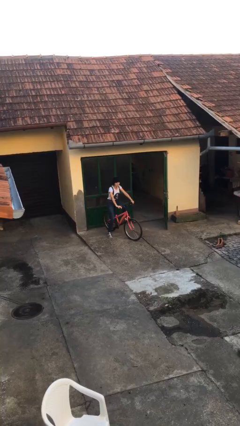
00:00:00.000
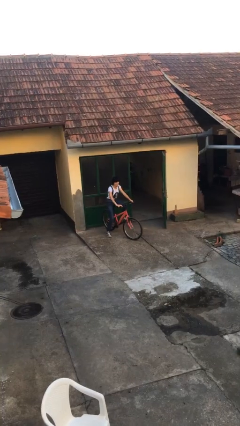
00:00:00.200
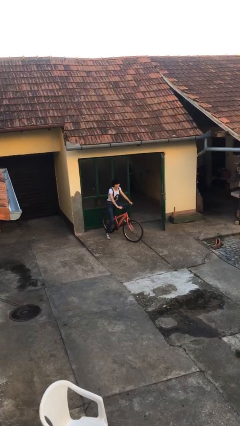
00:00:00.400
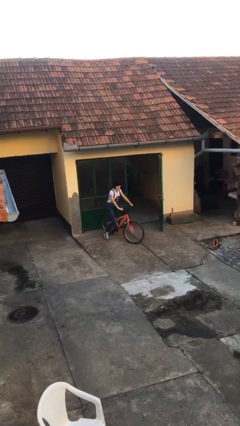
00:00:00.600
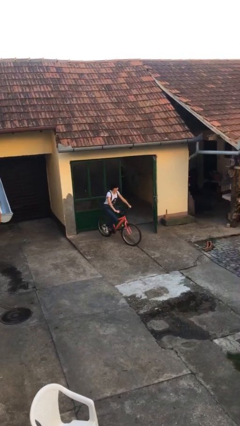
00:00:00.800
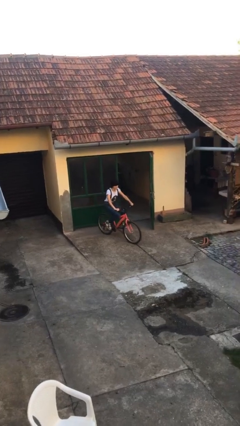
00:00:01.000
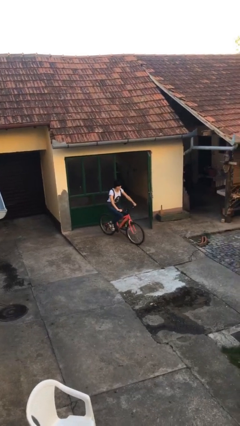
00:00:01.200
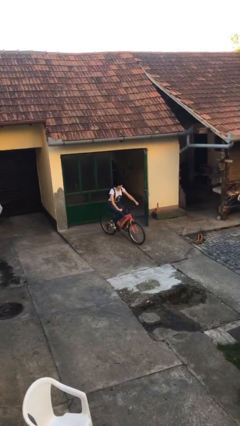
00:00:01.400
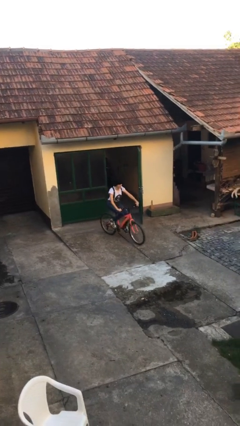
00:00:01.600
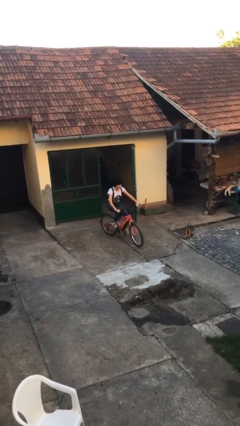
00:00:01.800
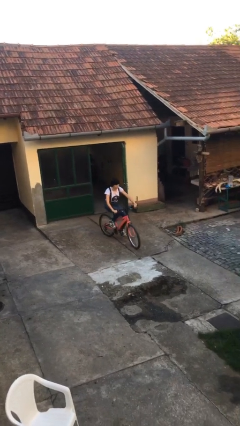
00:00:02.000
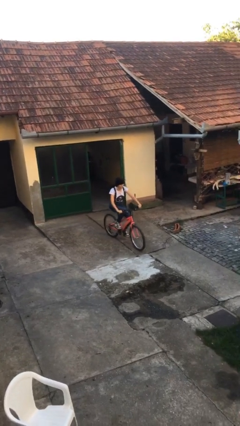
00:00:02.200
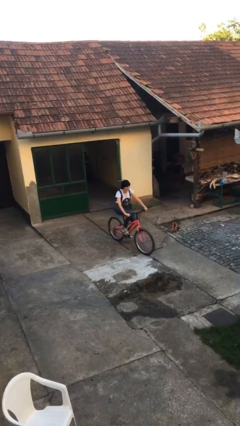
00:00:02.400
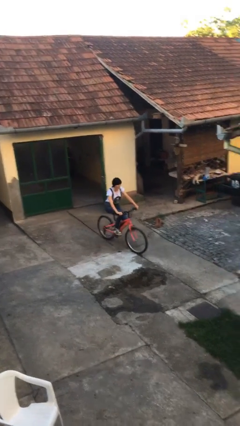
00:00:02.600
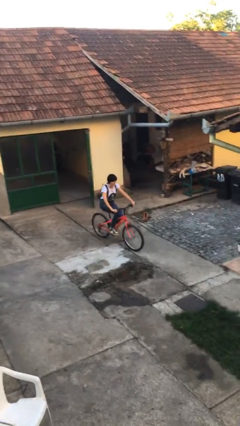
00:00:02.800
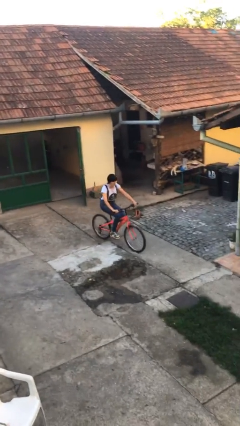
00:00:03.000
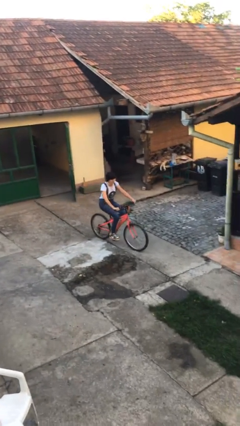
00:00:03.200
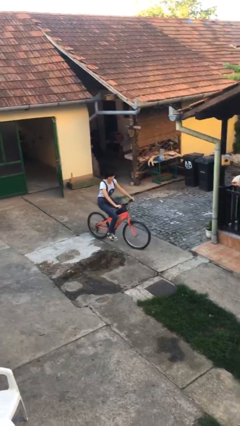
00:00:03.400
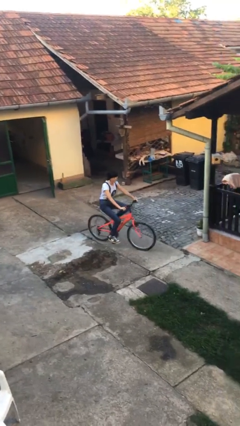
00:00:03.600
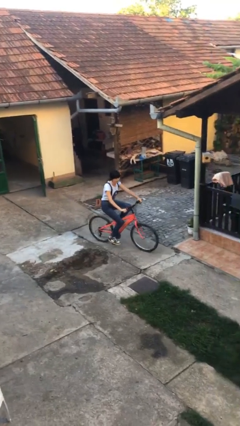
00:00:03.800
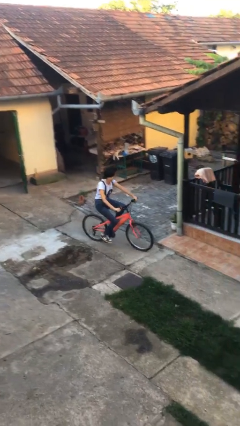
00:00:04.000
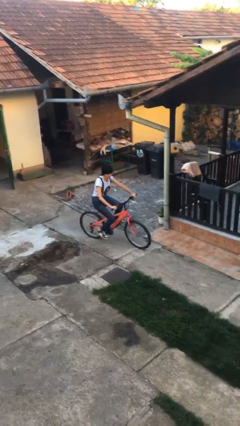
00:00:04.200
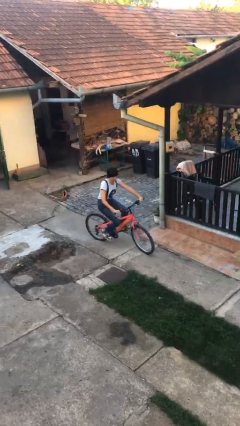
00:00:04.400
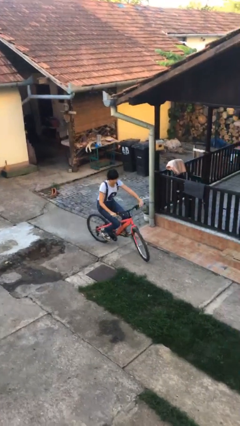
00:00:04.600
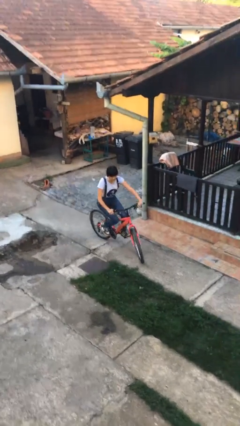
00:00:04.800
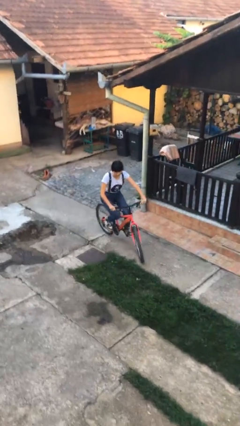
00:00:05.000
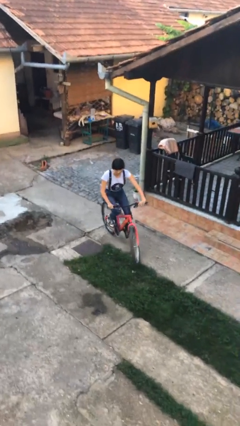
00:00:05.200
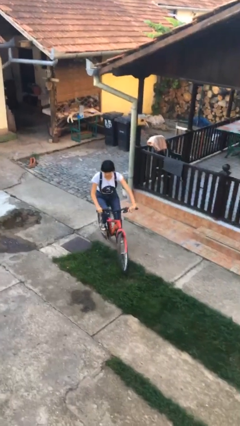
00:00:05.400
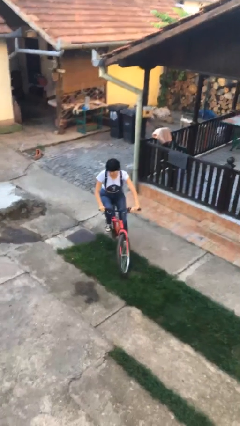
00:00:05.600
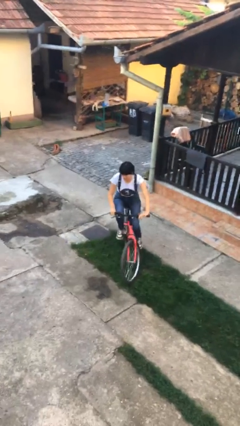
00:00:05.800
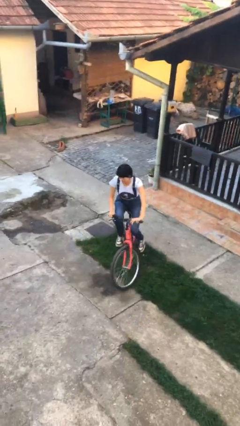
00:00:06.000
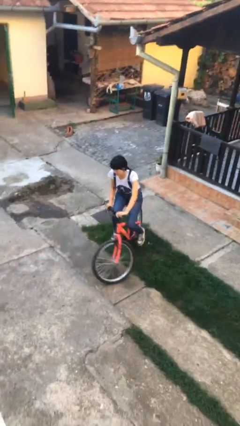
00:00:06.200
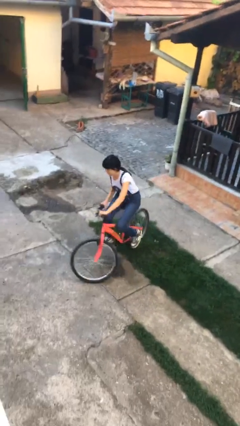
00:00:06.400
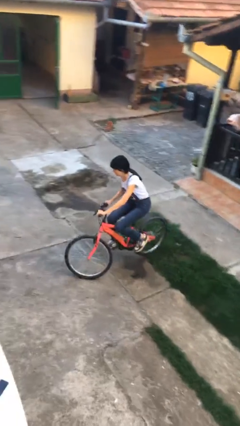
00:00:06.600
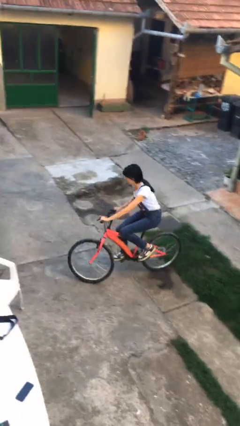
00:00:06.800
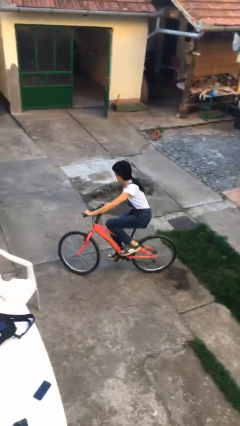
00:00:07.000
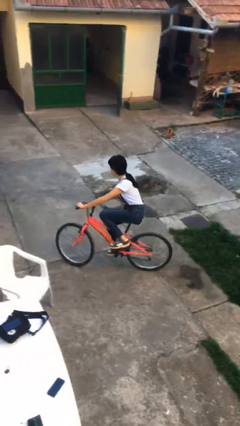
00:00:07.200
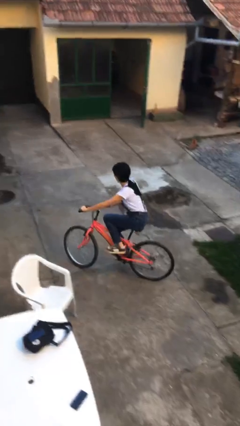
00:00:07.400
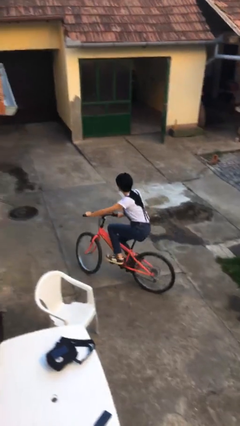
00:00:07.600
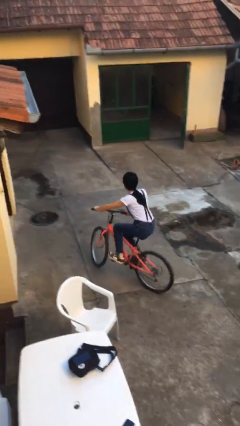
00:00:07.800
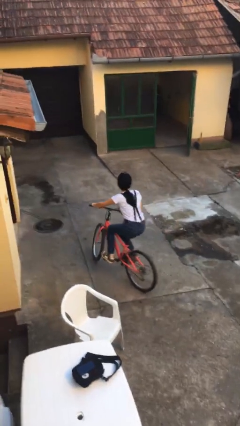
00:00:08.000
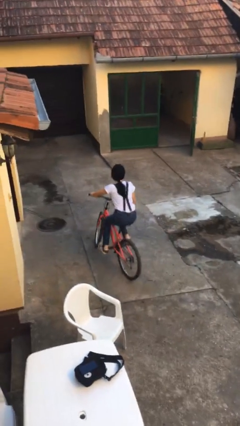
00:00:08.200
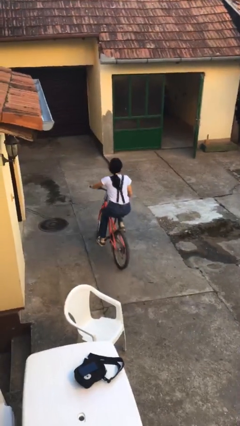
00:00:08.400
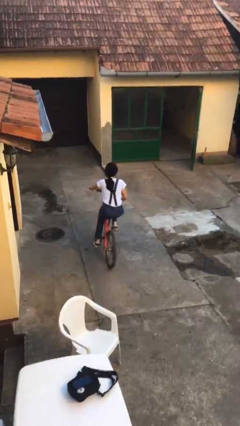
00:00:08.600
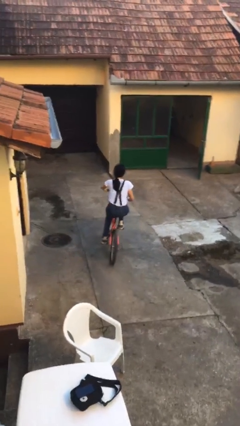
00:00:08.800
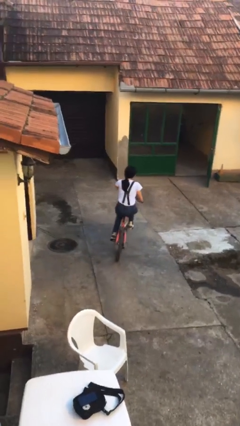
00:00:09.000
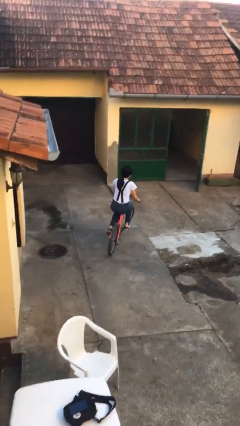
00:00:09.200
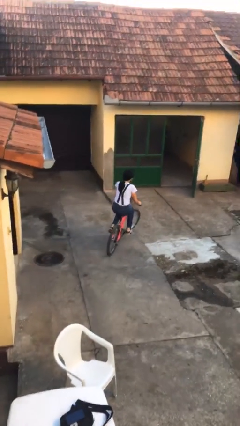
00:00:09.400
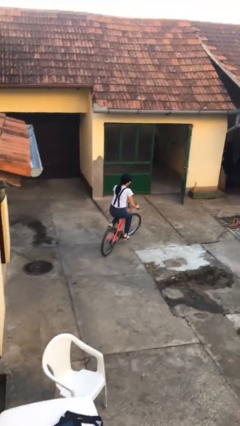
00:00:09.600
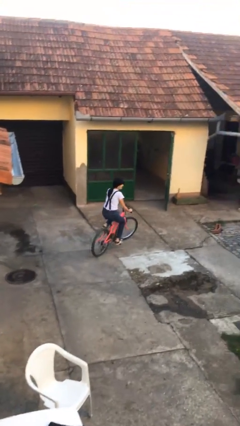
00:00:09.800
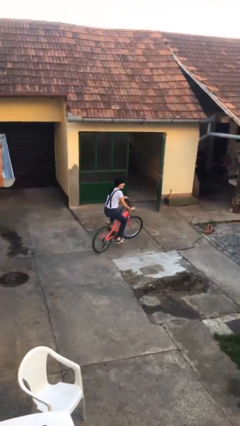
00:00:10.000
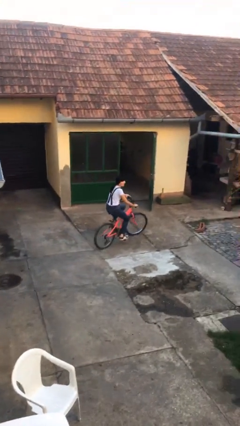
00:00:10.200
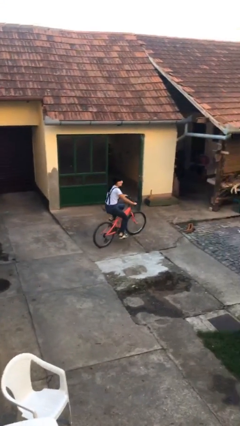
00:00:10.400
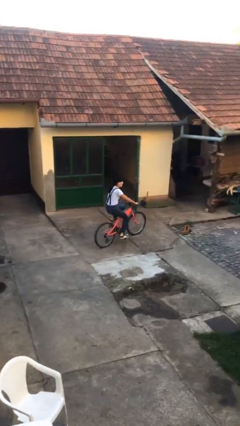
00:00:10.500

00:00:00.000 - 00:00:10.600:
person rides bicycle

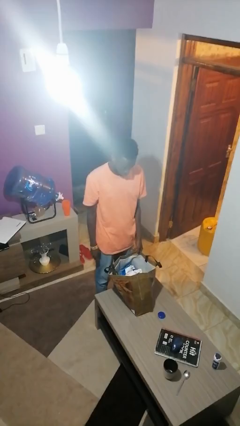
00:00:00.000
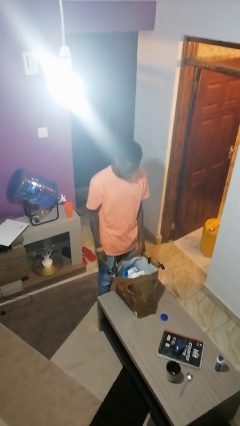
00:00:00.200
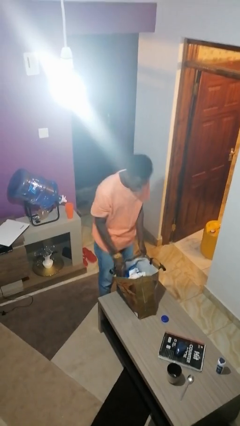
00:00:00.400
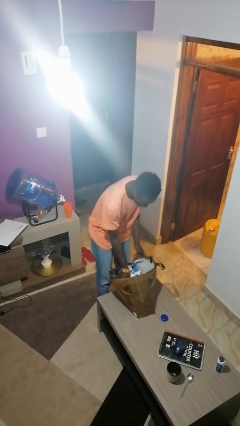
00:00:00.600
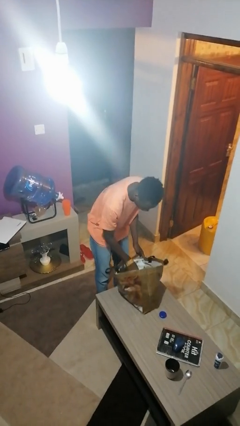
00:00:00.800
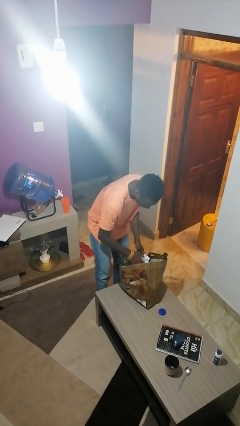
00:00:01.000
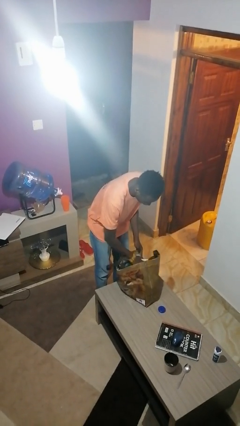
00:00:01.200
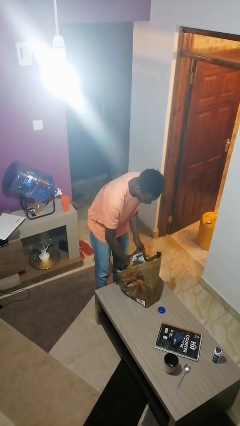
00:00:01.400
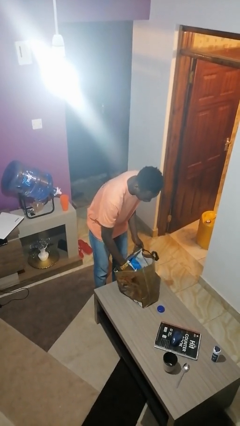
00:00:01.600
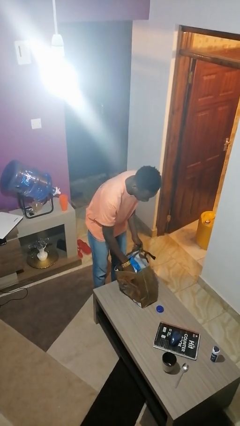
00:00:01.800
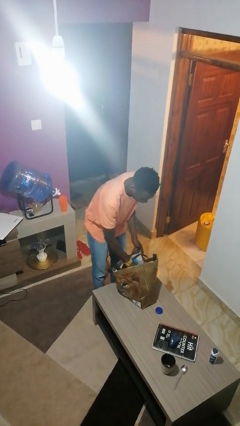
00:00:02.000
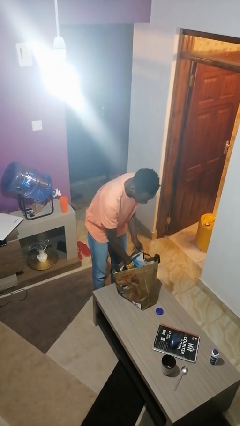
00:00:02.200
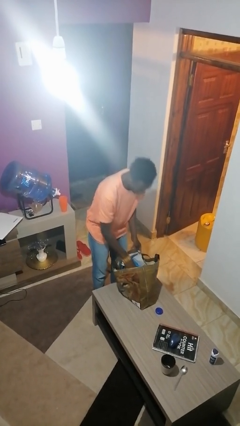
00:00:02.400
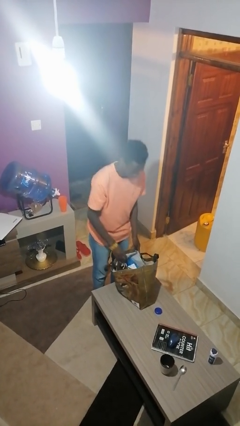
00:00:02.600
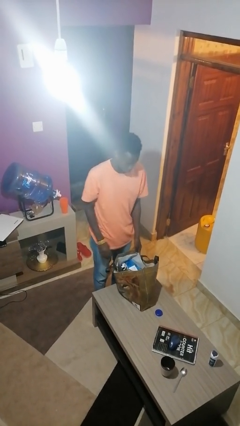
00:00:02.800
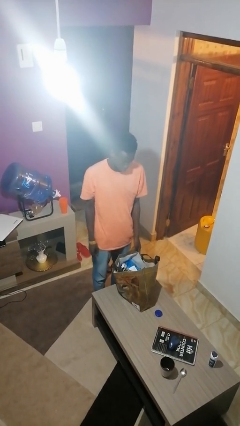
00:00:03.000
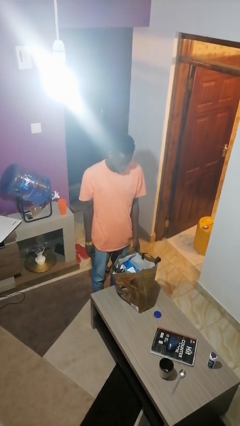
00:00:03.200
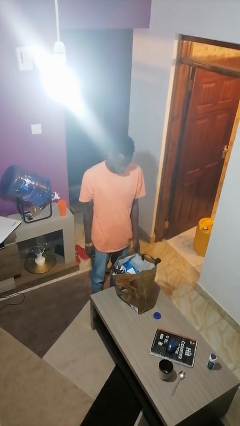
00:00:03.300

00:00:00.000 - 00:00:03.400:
person searches in bag

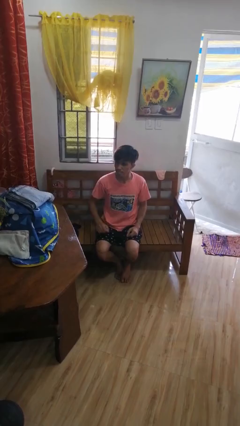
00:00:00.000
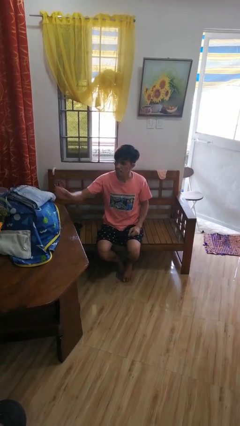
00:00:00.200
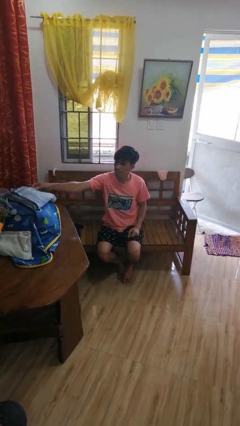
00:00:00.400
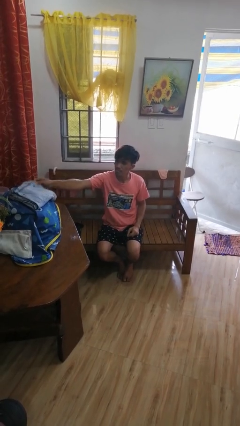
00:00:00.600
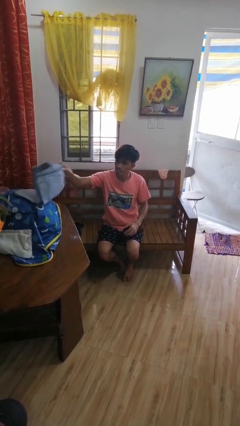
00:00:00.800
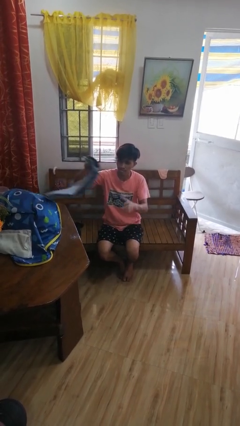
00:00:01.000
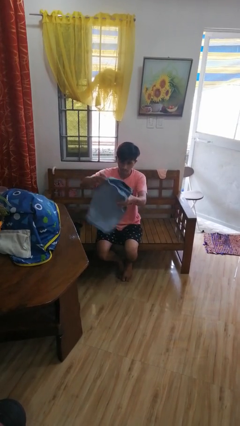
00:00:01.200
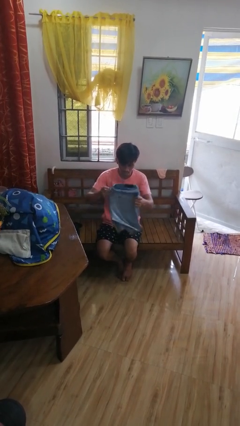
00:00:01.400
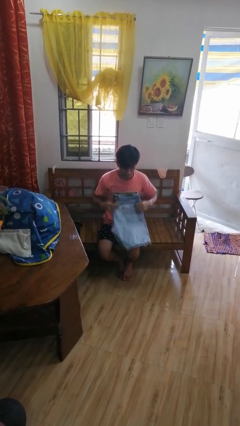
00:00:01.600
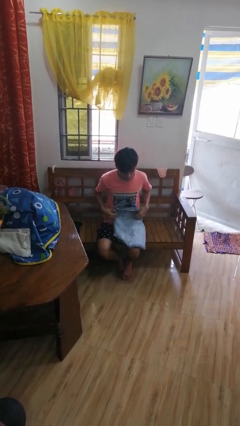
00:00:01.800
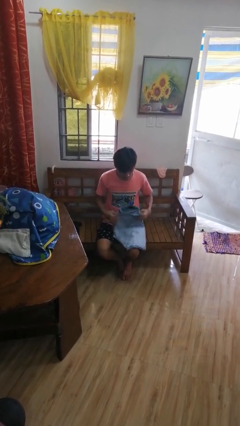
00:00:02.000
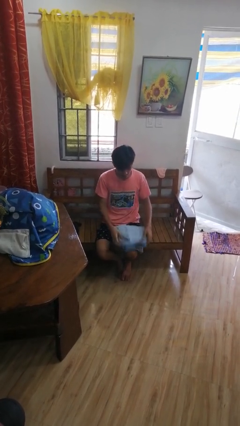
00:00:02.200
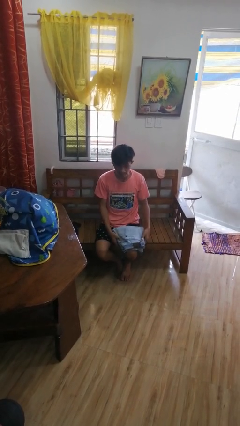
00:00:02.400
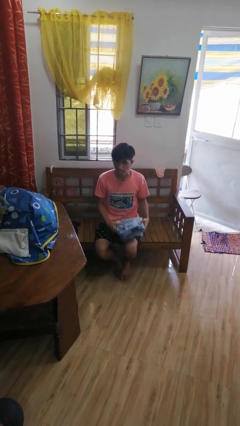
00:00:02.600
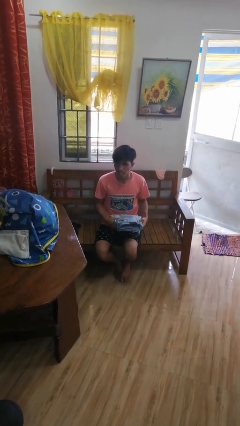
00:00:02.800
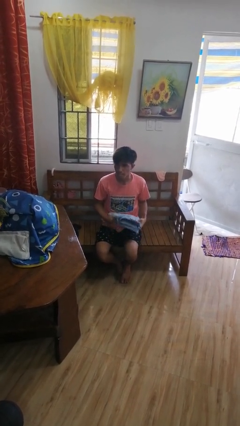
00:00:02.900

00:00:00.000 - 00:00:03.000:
person folds pants

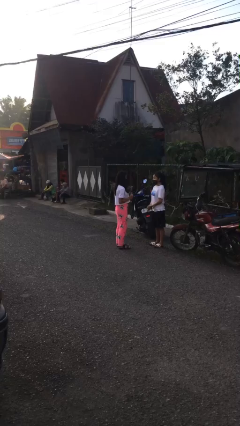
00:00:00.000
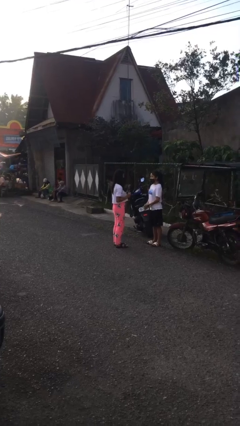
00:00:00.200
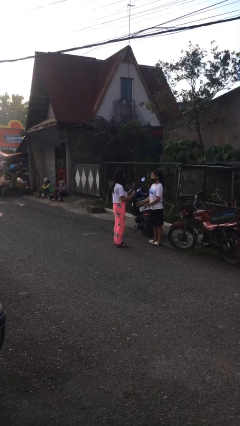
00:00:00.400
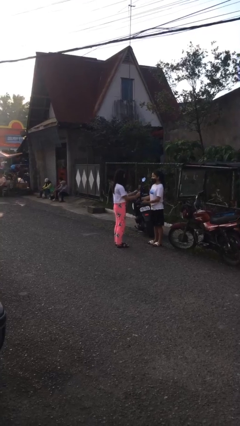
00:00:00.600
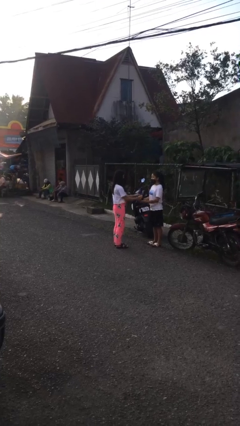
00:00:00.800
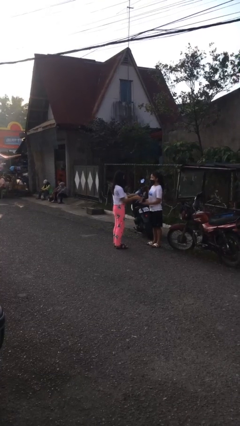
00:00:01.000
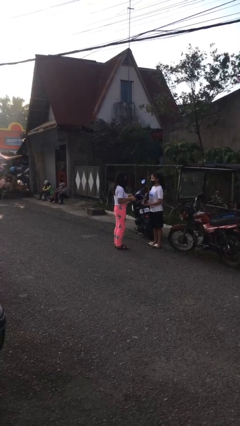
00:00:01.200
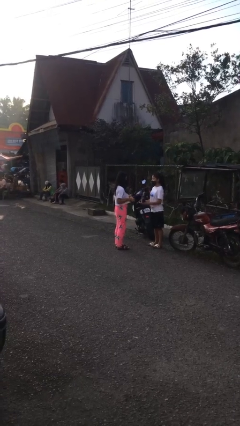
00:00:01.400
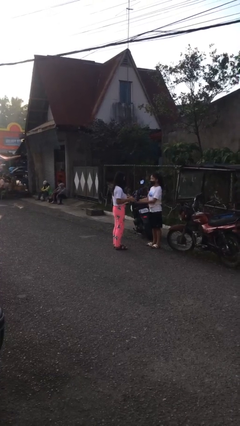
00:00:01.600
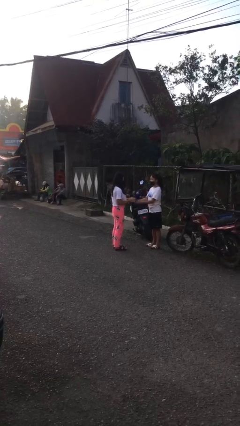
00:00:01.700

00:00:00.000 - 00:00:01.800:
person transfers object to person
